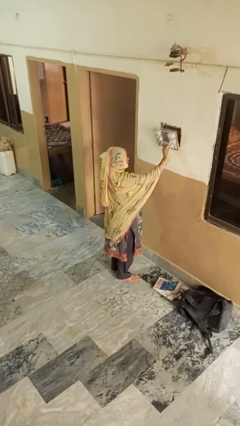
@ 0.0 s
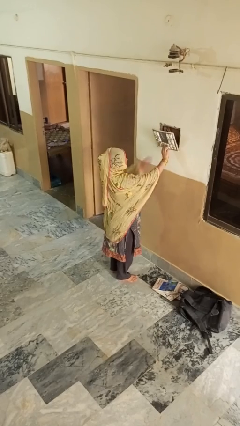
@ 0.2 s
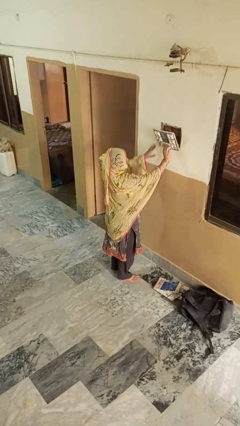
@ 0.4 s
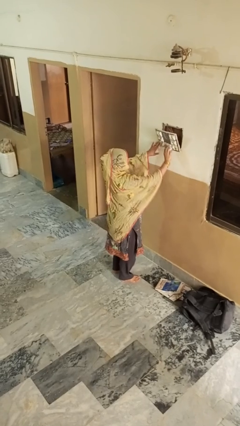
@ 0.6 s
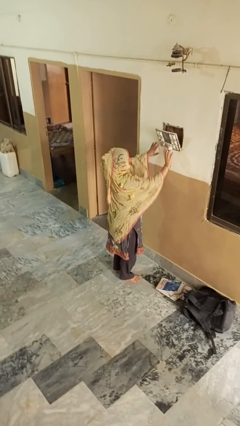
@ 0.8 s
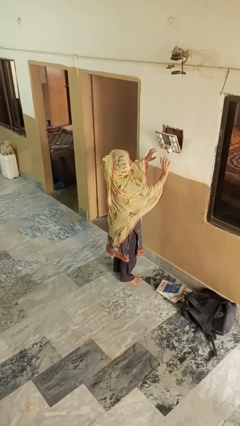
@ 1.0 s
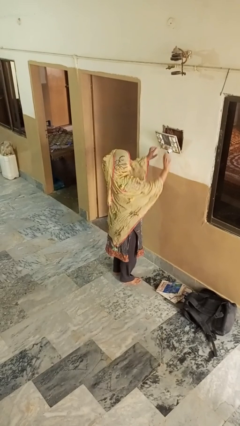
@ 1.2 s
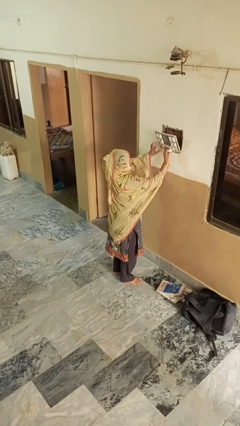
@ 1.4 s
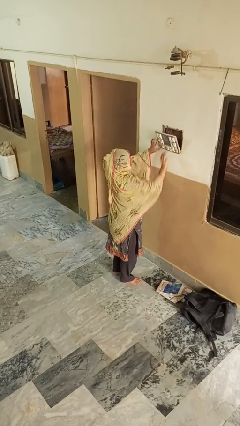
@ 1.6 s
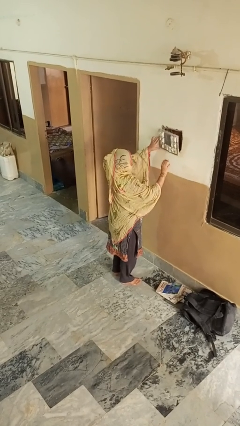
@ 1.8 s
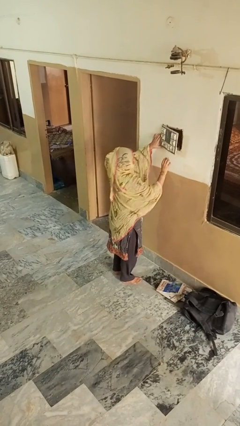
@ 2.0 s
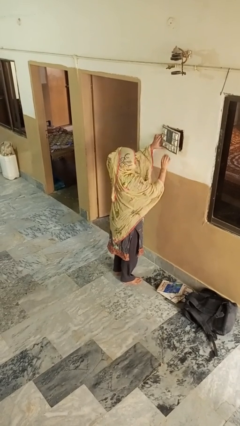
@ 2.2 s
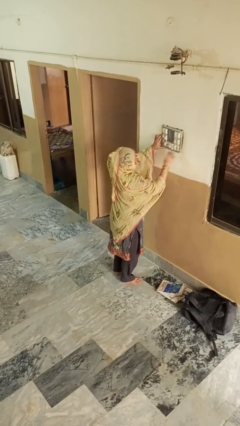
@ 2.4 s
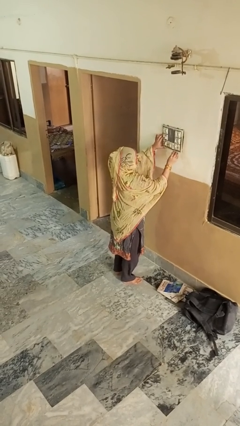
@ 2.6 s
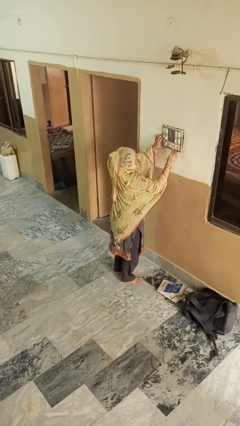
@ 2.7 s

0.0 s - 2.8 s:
person unplugs from electrical socket

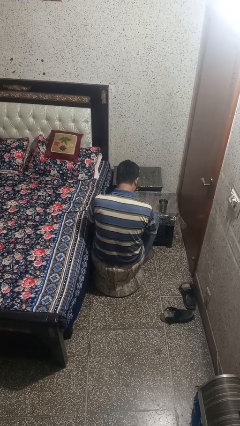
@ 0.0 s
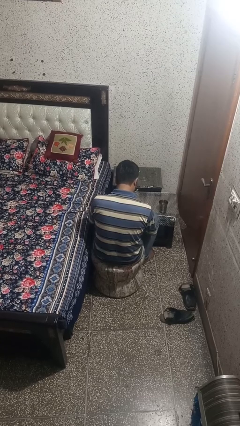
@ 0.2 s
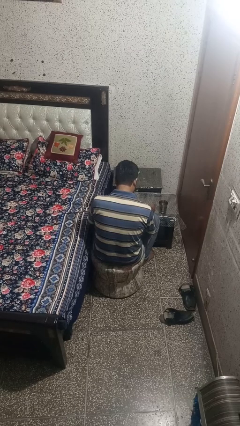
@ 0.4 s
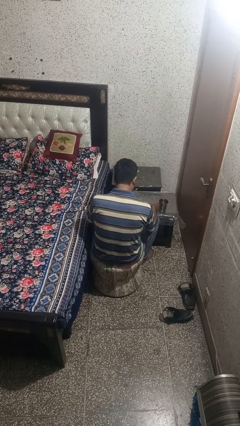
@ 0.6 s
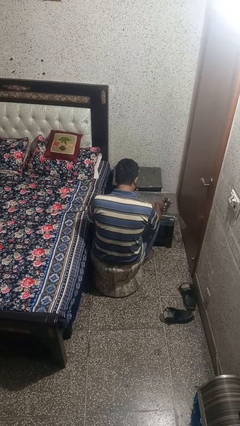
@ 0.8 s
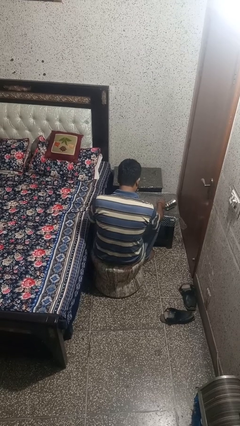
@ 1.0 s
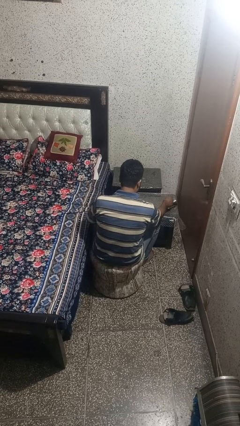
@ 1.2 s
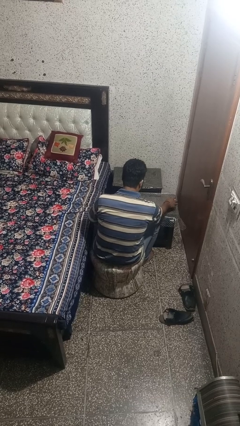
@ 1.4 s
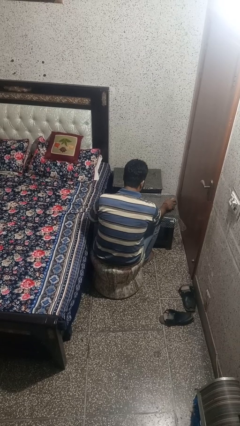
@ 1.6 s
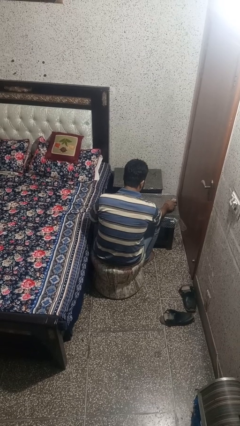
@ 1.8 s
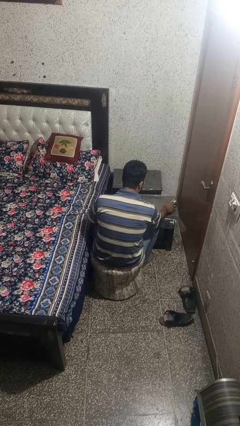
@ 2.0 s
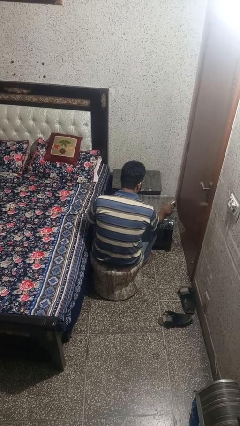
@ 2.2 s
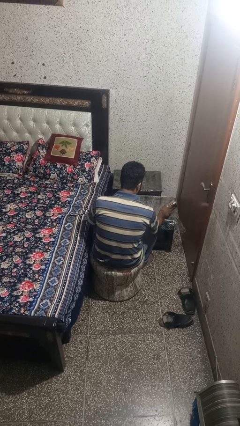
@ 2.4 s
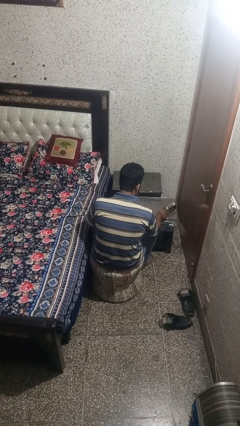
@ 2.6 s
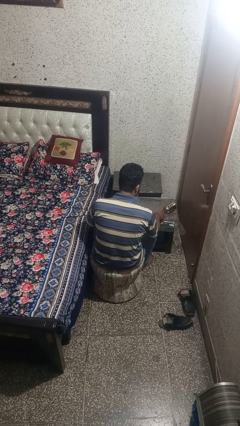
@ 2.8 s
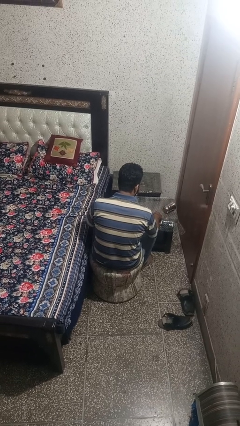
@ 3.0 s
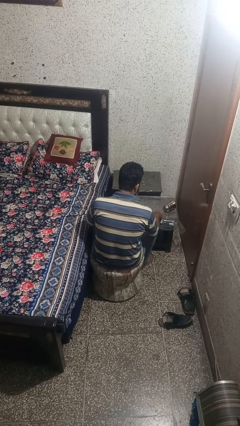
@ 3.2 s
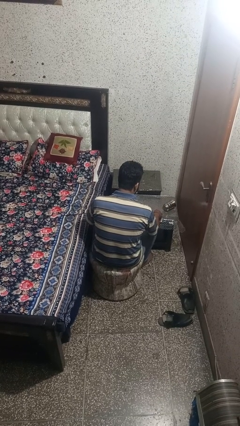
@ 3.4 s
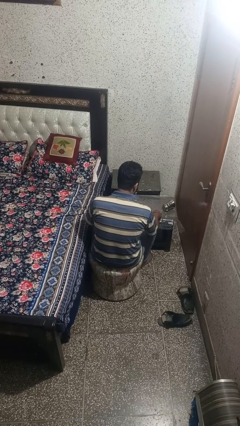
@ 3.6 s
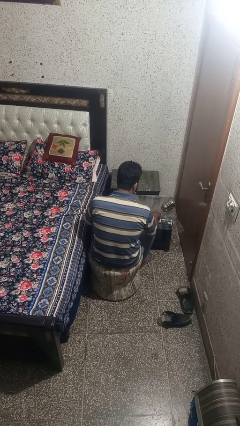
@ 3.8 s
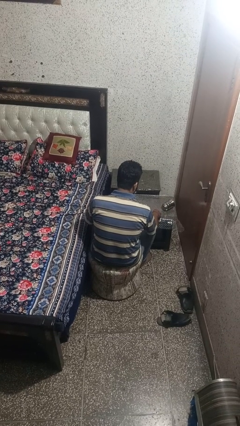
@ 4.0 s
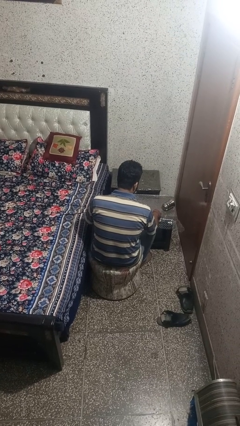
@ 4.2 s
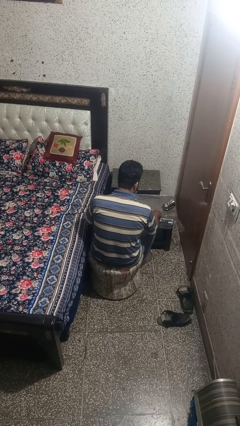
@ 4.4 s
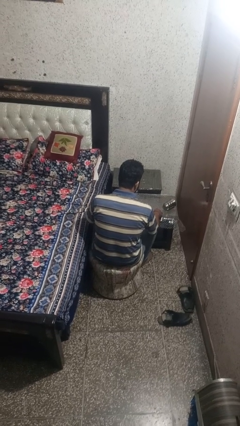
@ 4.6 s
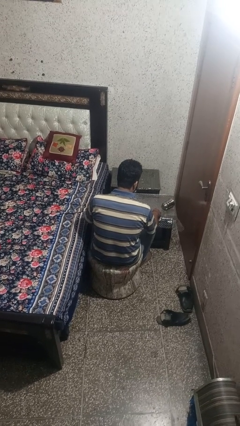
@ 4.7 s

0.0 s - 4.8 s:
person knocks over glass

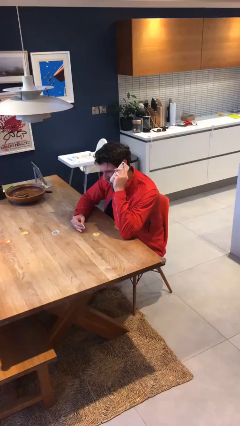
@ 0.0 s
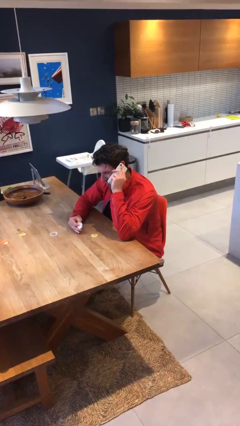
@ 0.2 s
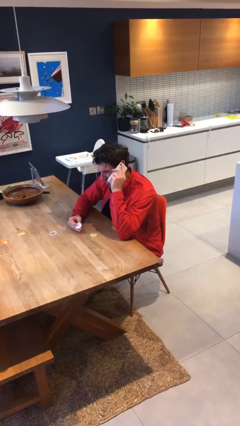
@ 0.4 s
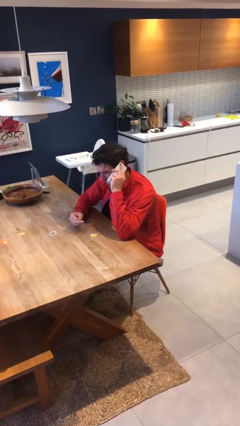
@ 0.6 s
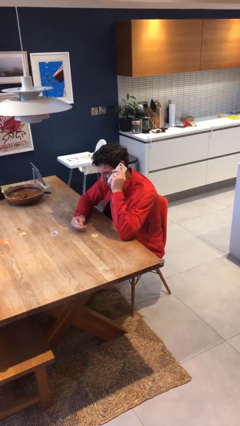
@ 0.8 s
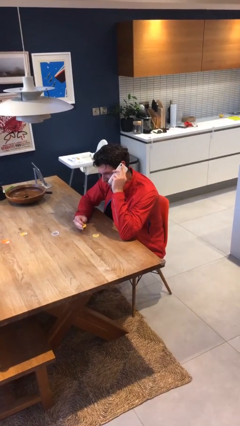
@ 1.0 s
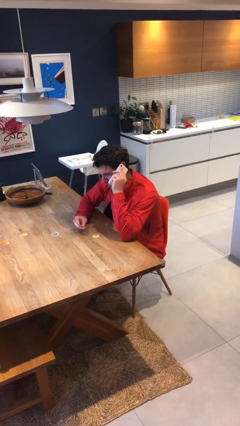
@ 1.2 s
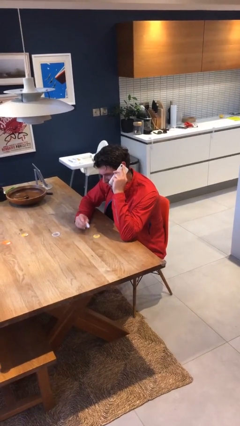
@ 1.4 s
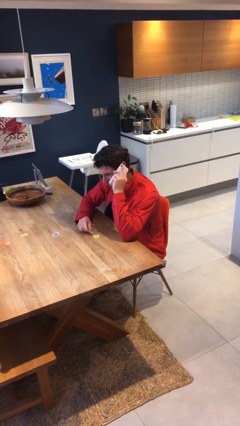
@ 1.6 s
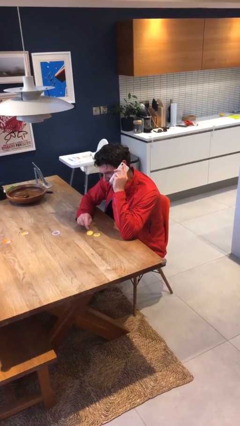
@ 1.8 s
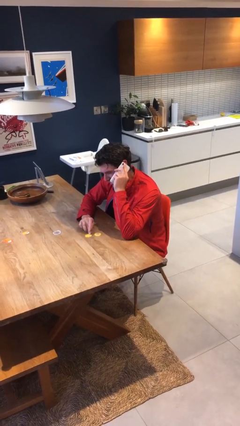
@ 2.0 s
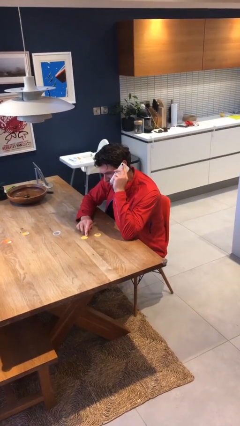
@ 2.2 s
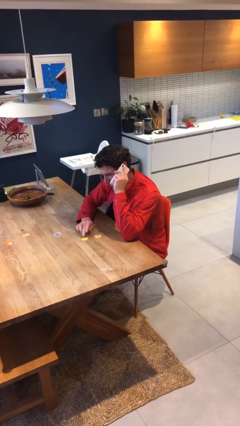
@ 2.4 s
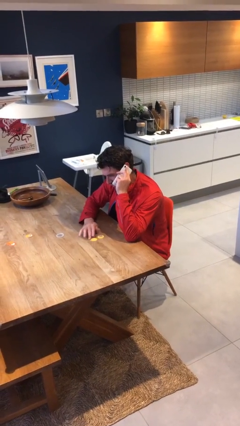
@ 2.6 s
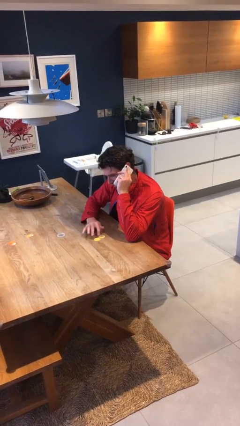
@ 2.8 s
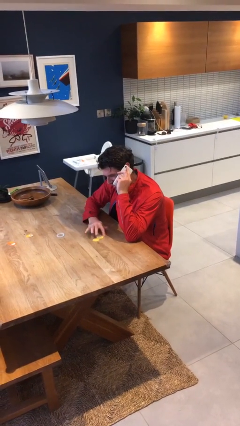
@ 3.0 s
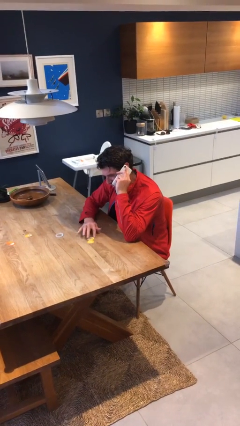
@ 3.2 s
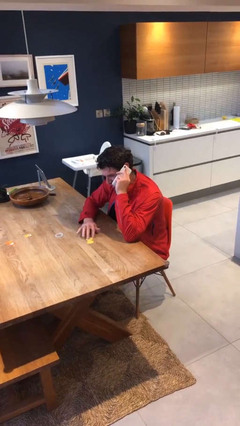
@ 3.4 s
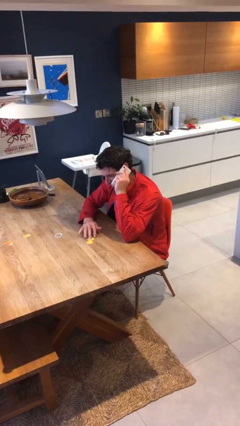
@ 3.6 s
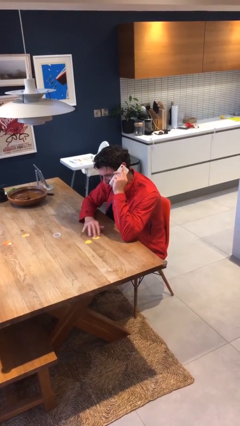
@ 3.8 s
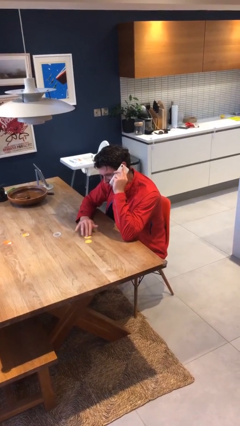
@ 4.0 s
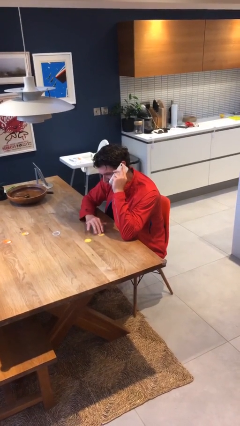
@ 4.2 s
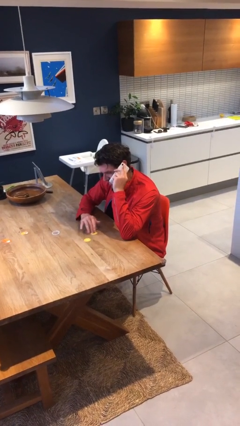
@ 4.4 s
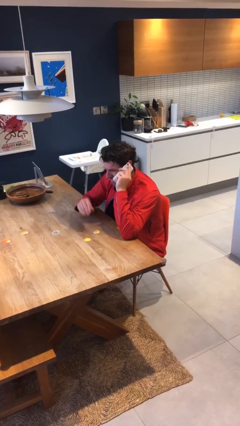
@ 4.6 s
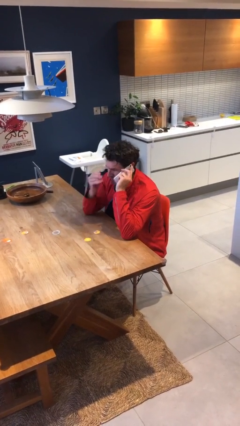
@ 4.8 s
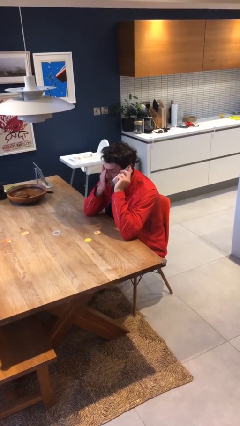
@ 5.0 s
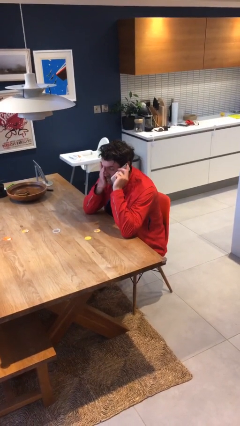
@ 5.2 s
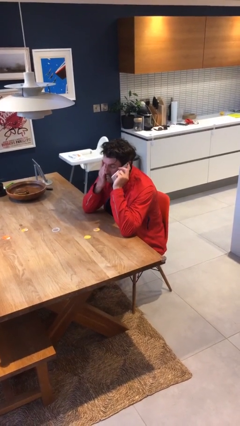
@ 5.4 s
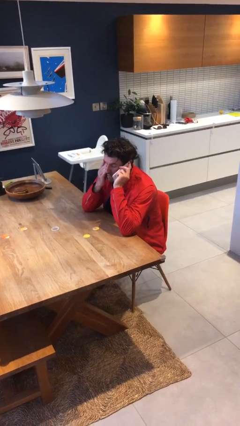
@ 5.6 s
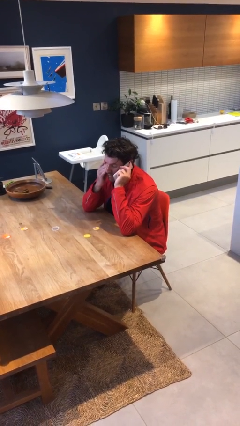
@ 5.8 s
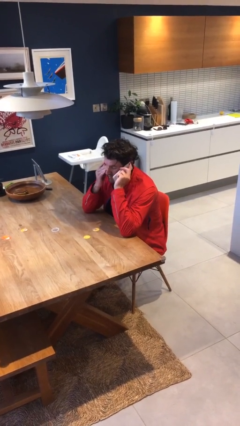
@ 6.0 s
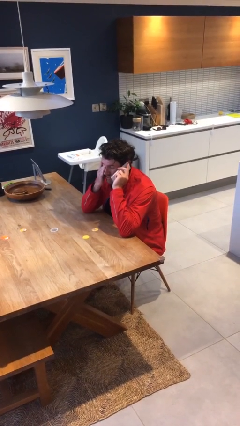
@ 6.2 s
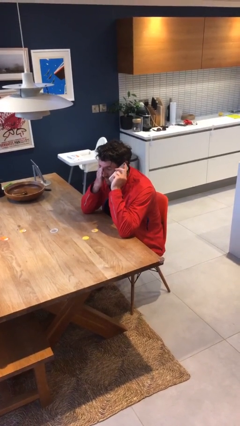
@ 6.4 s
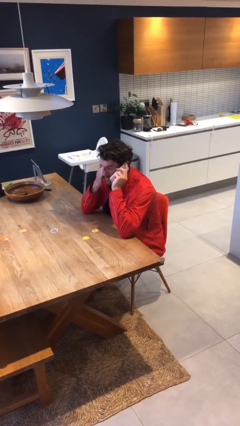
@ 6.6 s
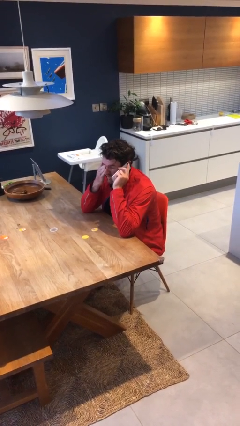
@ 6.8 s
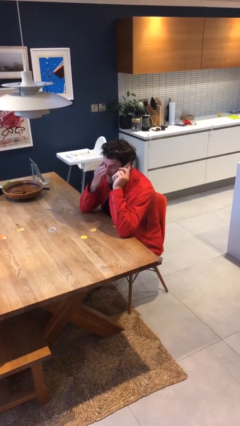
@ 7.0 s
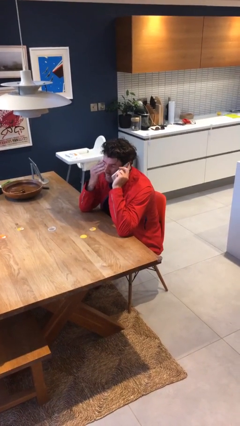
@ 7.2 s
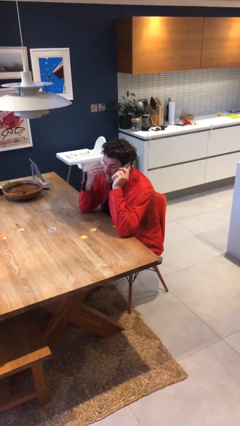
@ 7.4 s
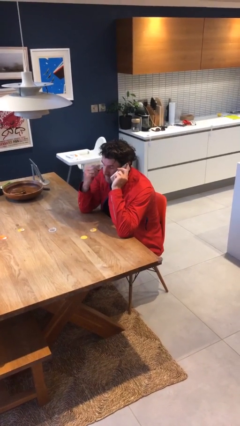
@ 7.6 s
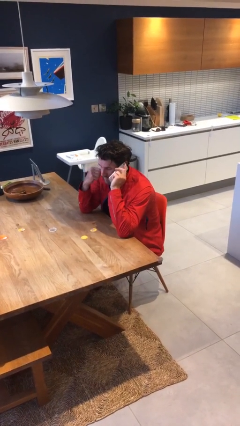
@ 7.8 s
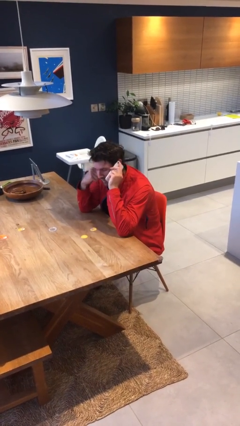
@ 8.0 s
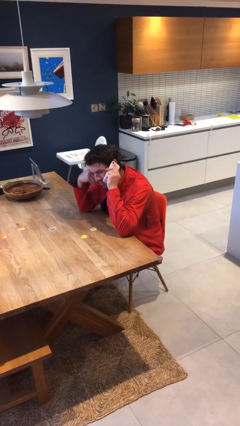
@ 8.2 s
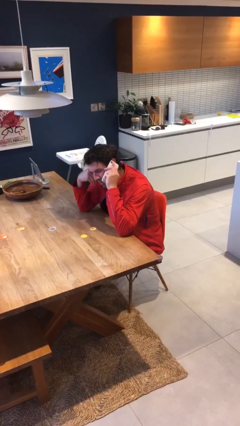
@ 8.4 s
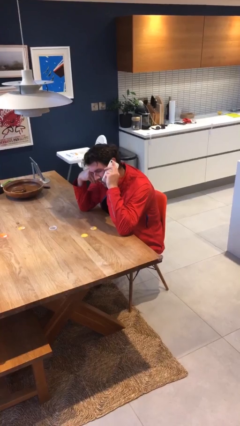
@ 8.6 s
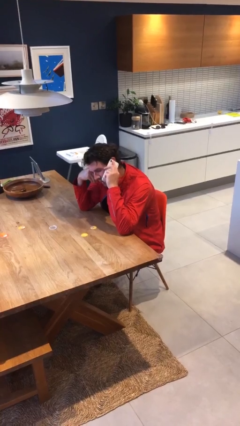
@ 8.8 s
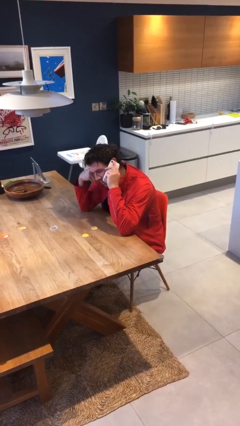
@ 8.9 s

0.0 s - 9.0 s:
person talks on phone

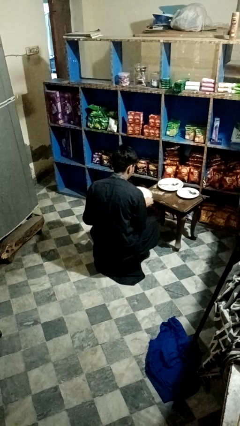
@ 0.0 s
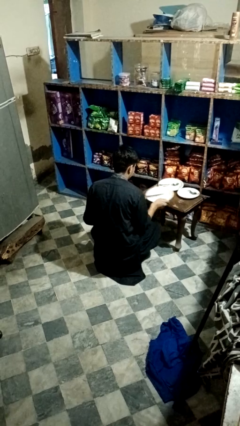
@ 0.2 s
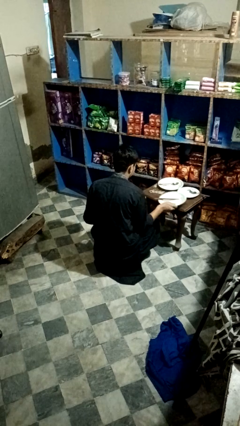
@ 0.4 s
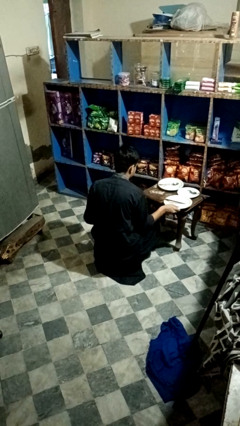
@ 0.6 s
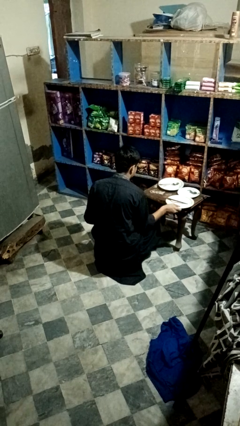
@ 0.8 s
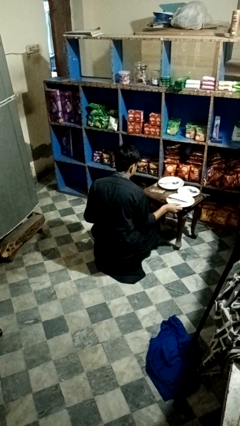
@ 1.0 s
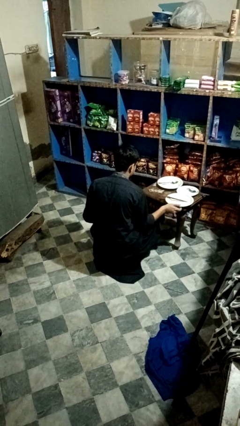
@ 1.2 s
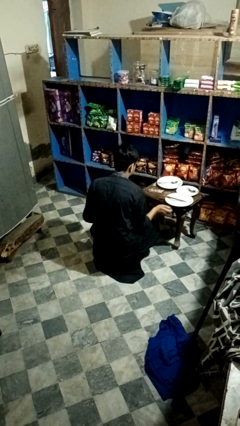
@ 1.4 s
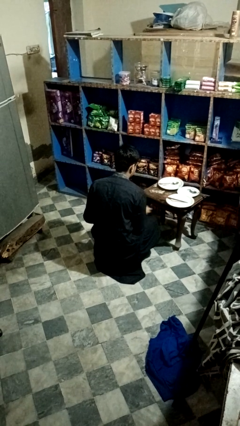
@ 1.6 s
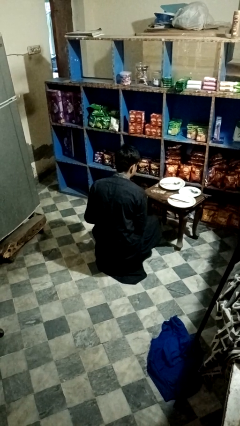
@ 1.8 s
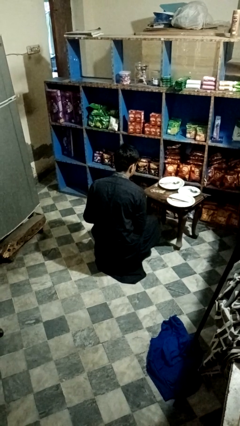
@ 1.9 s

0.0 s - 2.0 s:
person sets table
